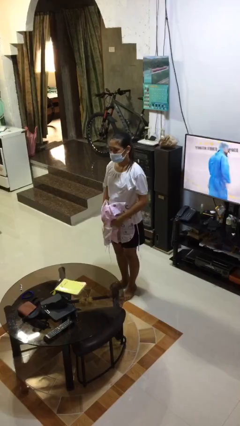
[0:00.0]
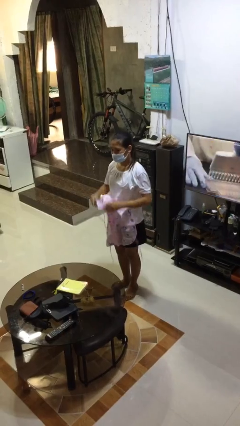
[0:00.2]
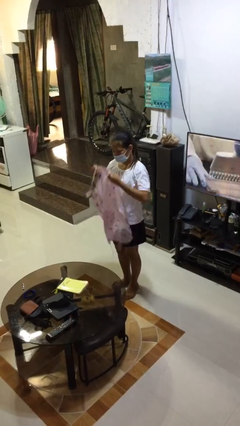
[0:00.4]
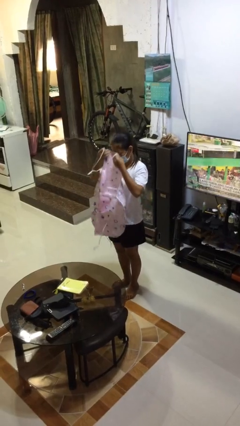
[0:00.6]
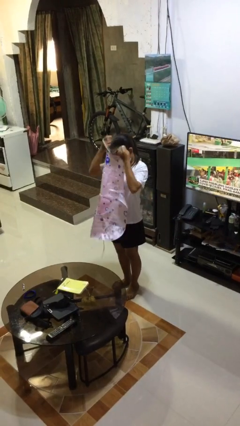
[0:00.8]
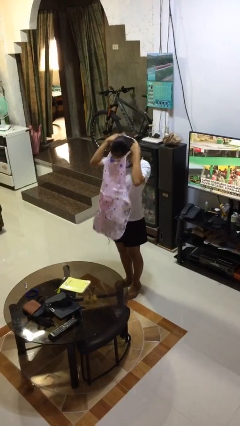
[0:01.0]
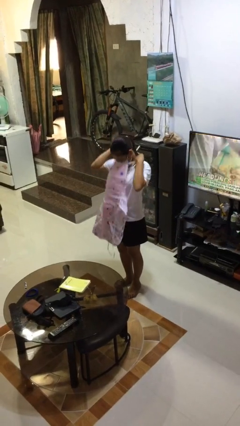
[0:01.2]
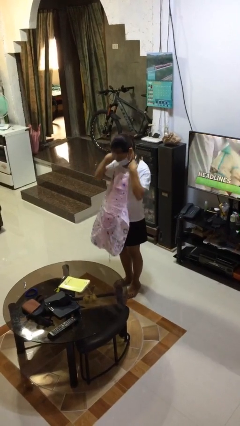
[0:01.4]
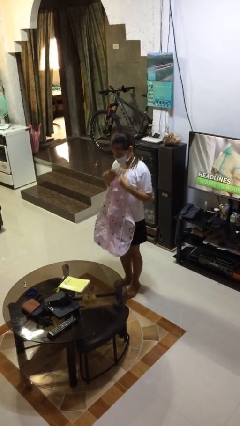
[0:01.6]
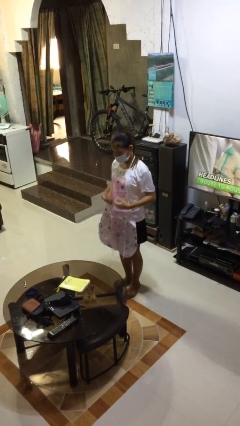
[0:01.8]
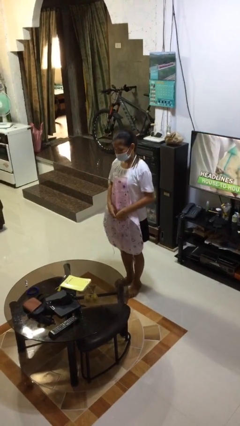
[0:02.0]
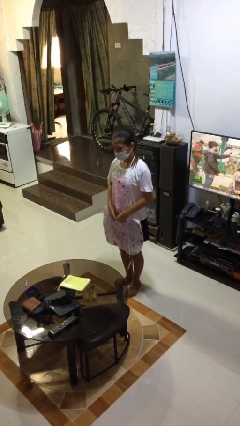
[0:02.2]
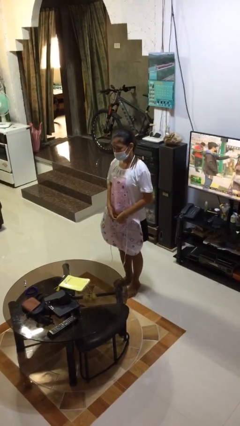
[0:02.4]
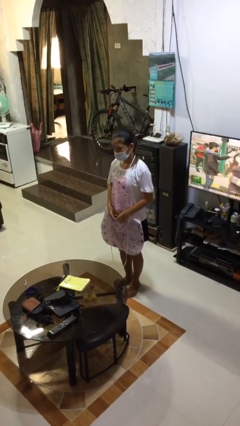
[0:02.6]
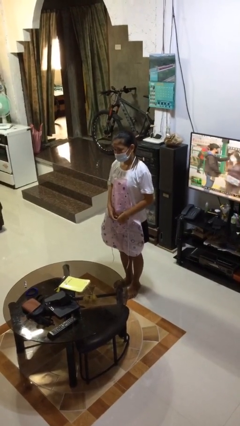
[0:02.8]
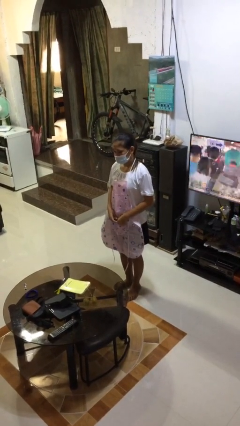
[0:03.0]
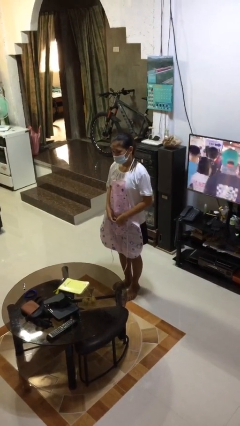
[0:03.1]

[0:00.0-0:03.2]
person puts on apron

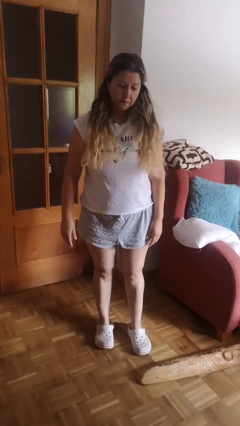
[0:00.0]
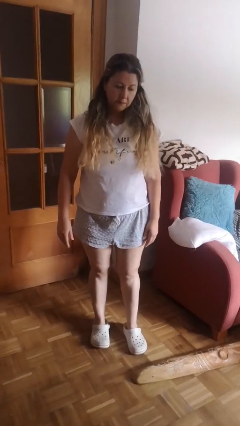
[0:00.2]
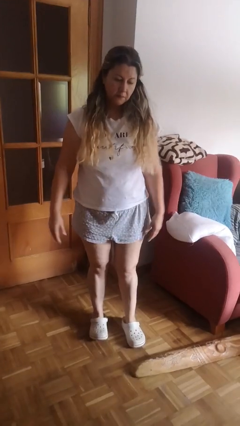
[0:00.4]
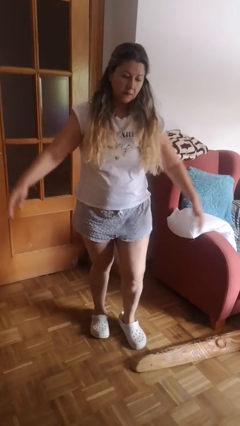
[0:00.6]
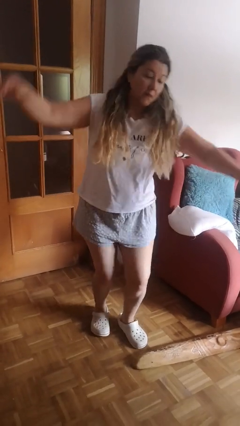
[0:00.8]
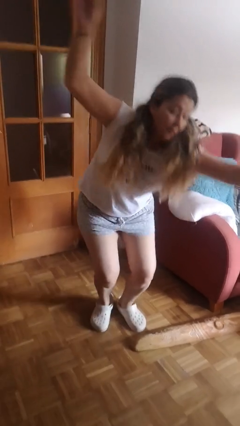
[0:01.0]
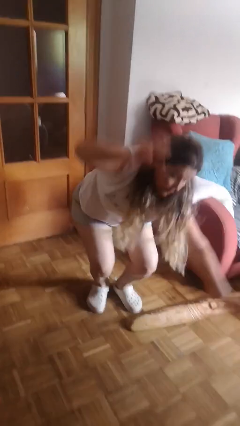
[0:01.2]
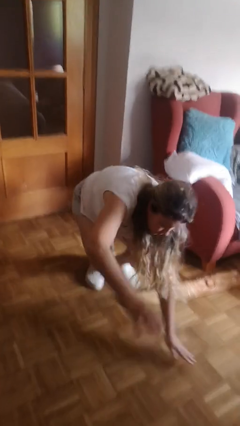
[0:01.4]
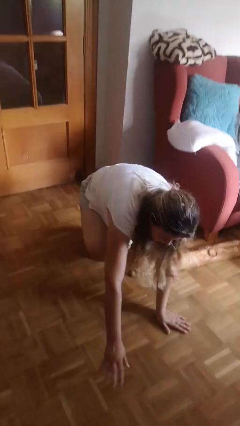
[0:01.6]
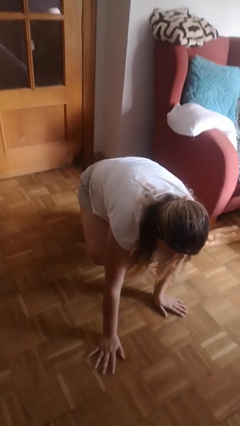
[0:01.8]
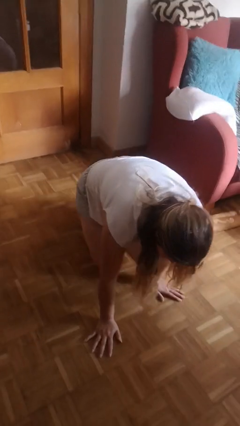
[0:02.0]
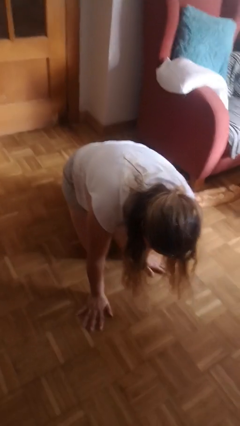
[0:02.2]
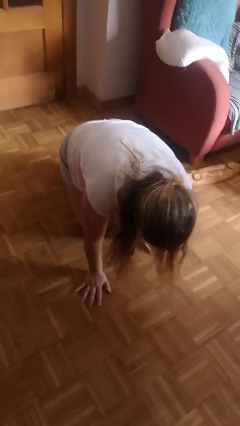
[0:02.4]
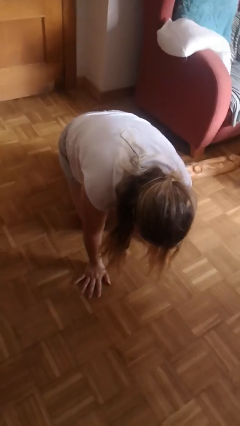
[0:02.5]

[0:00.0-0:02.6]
person trips on object on floor

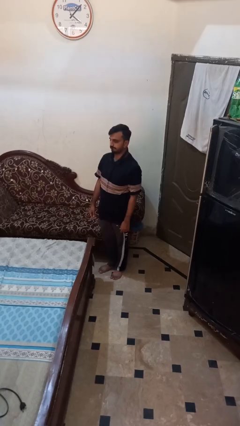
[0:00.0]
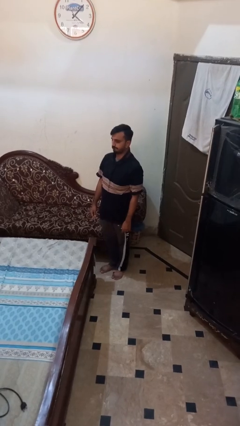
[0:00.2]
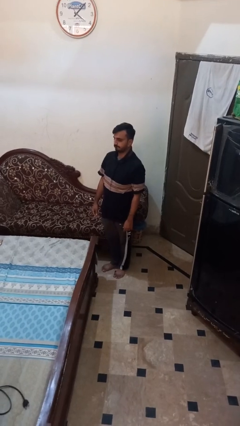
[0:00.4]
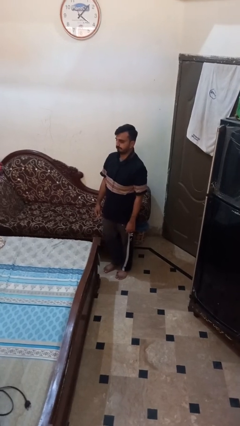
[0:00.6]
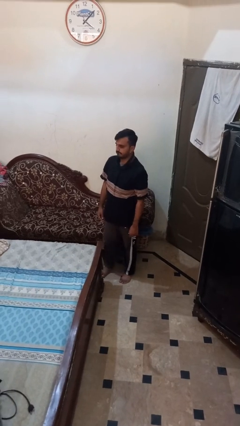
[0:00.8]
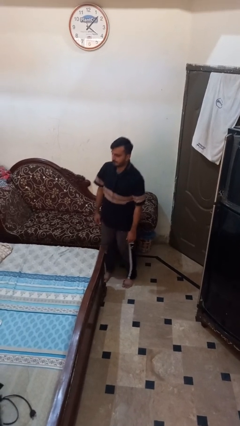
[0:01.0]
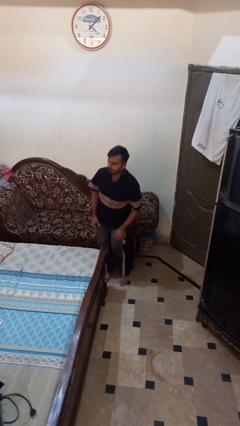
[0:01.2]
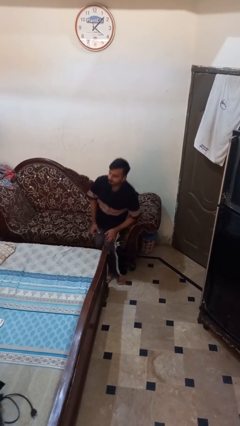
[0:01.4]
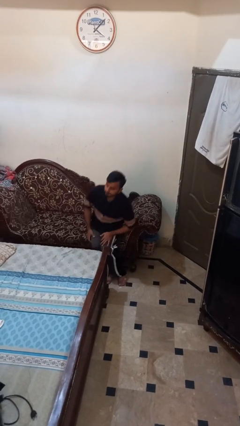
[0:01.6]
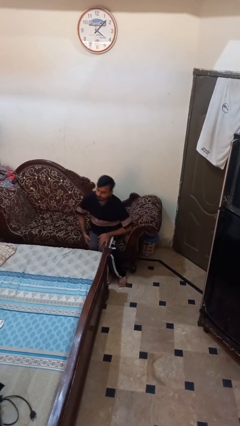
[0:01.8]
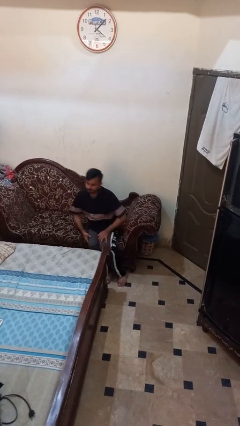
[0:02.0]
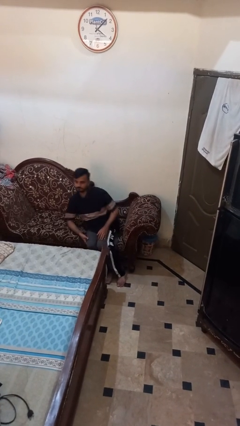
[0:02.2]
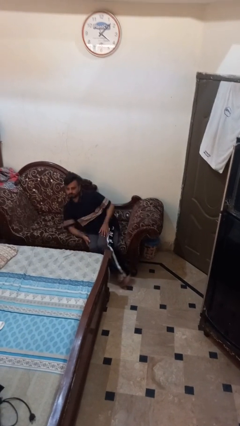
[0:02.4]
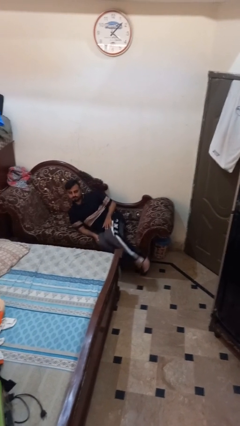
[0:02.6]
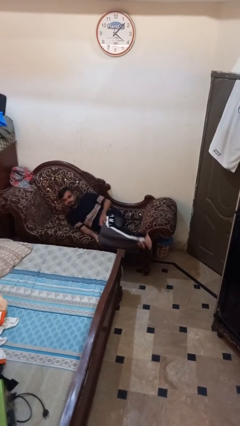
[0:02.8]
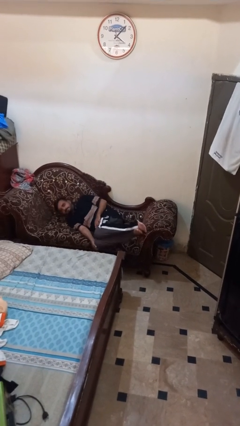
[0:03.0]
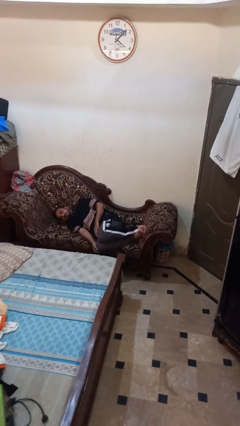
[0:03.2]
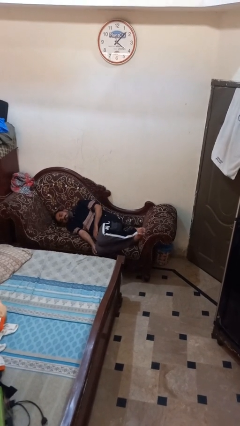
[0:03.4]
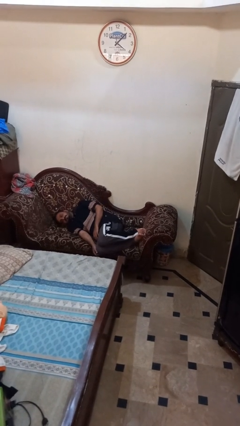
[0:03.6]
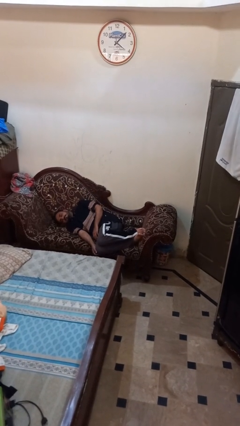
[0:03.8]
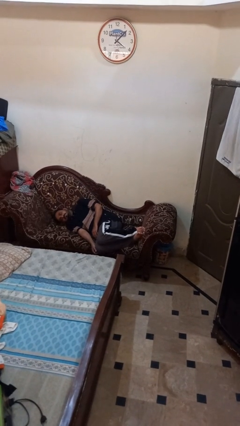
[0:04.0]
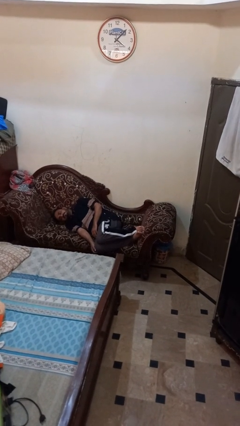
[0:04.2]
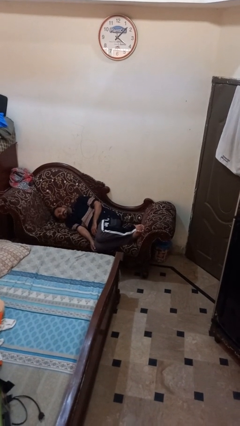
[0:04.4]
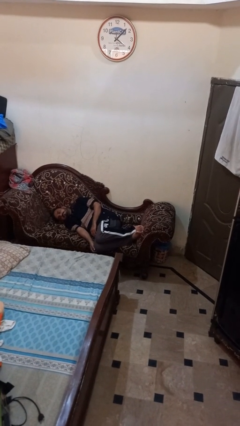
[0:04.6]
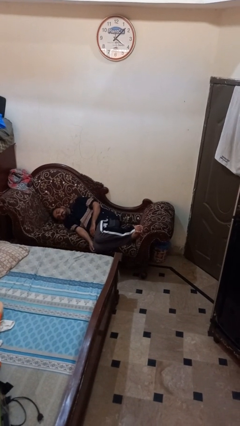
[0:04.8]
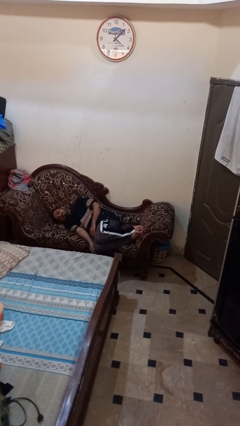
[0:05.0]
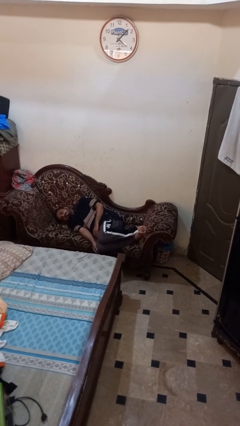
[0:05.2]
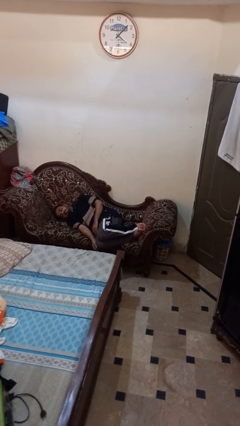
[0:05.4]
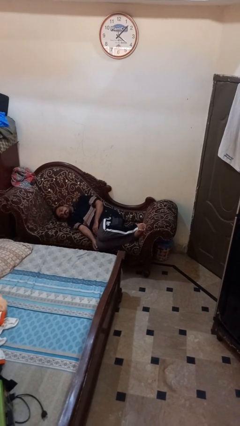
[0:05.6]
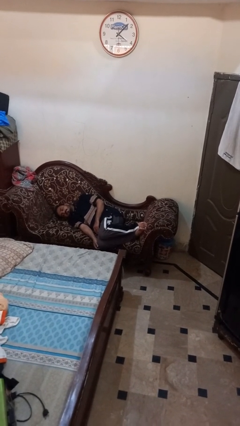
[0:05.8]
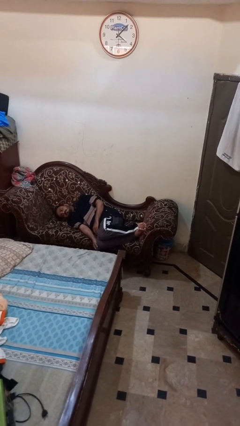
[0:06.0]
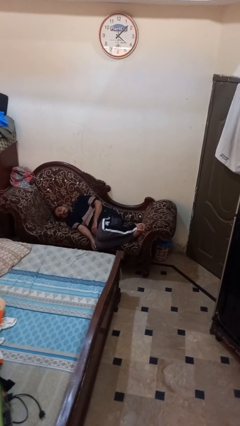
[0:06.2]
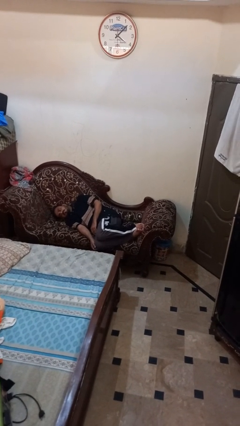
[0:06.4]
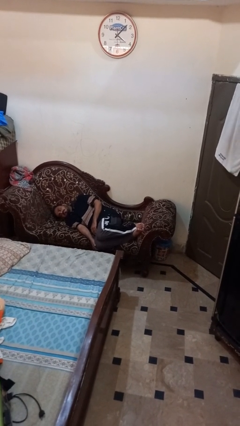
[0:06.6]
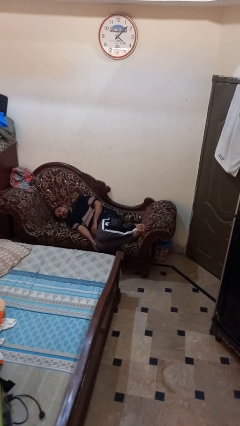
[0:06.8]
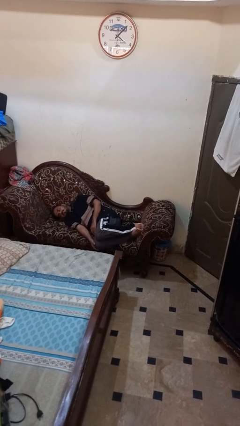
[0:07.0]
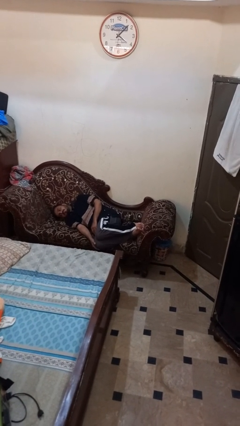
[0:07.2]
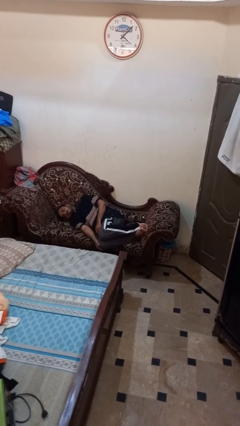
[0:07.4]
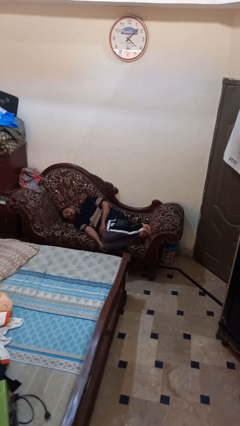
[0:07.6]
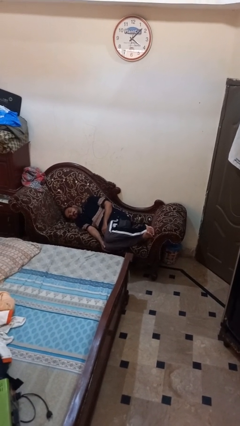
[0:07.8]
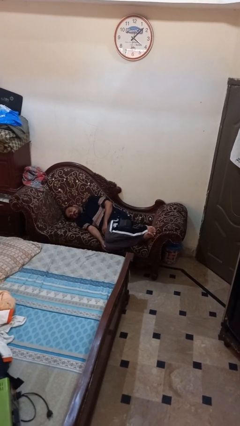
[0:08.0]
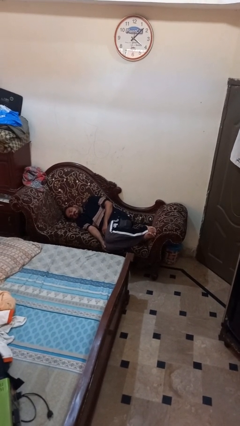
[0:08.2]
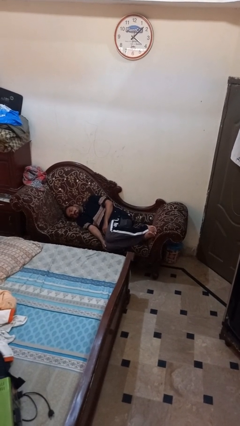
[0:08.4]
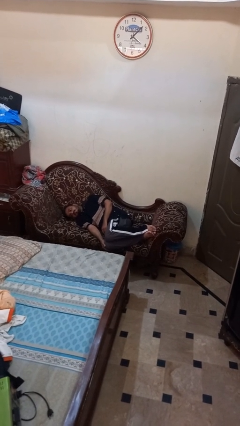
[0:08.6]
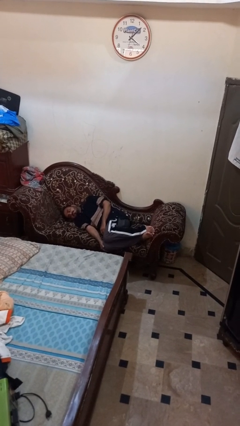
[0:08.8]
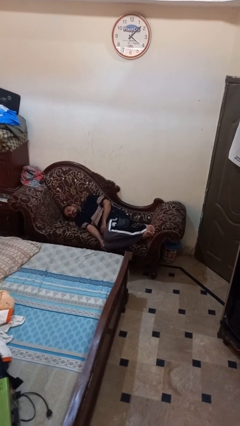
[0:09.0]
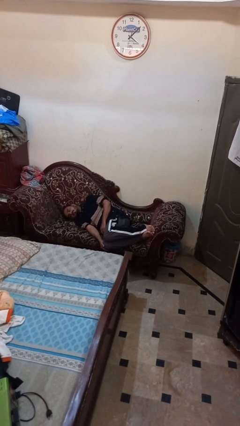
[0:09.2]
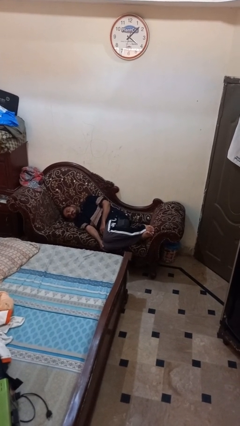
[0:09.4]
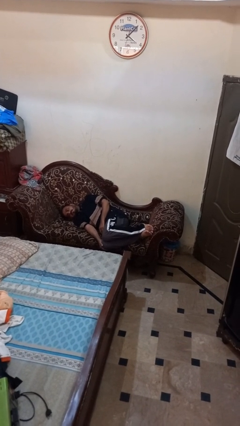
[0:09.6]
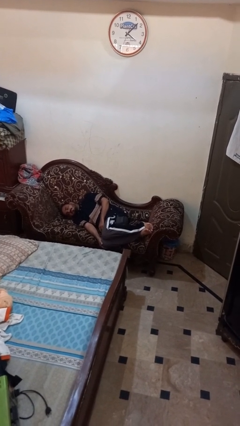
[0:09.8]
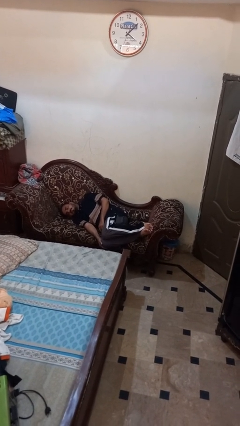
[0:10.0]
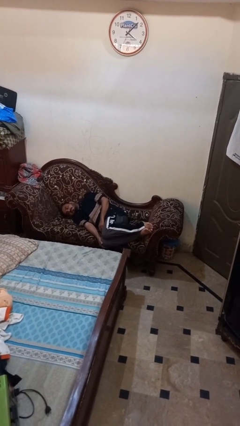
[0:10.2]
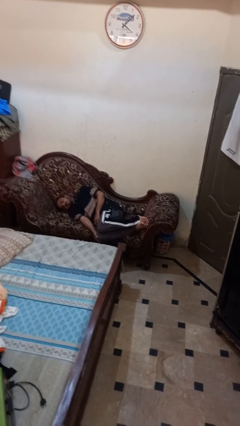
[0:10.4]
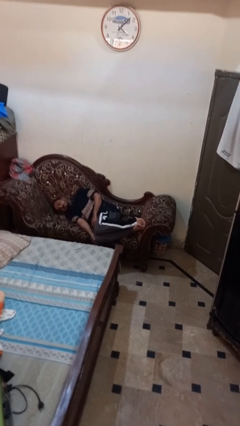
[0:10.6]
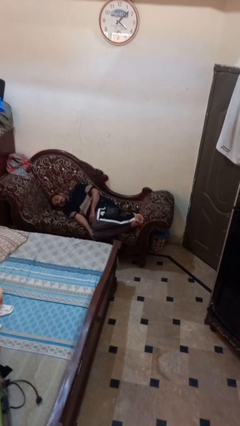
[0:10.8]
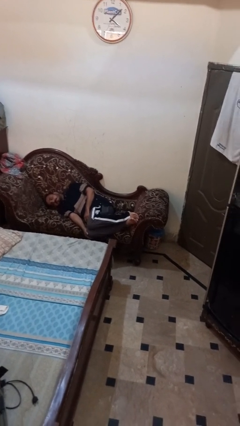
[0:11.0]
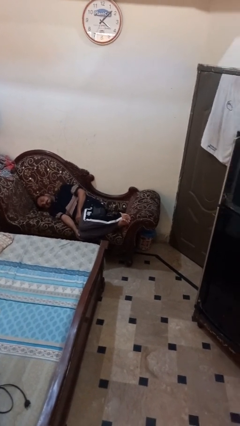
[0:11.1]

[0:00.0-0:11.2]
person lies down on couch

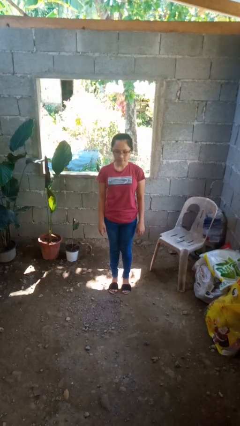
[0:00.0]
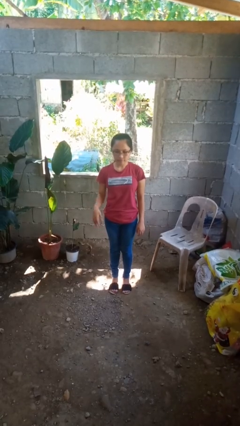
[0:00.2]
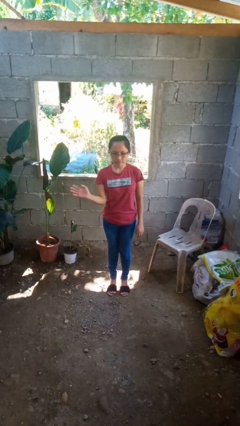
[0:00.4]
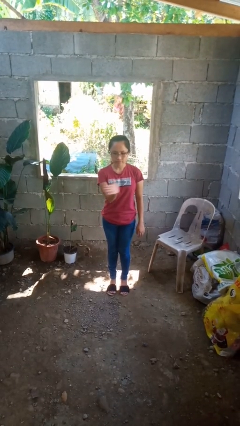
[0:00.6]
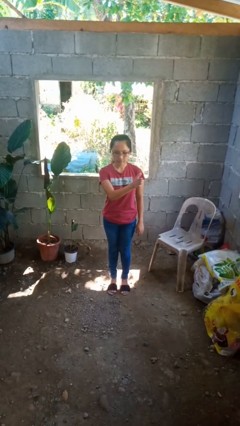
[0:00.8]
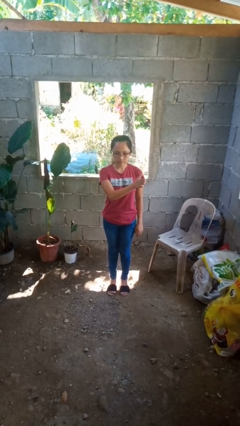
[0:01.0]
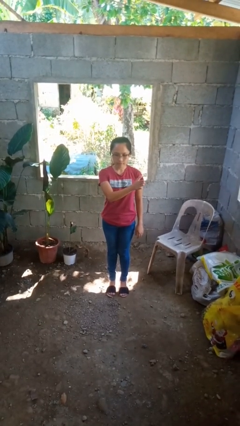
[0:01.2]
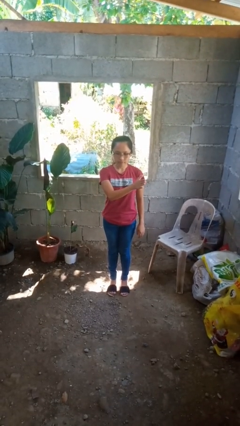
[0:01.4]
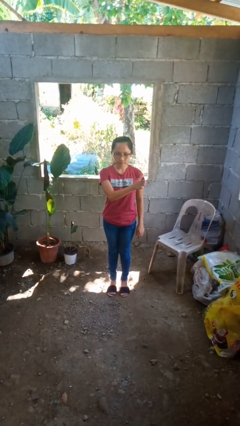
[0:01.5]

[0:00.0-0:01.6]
person gestures swipe left
